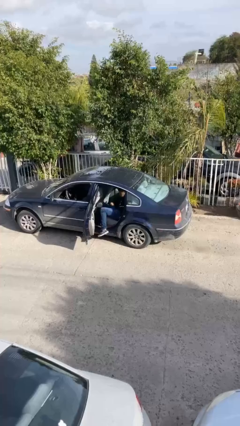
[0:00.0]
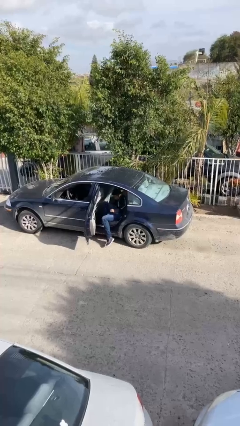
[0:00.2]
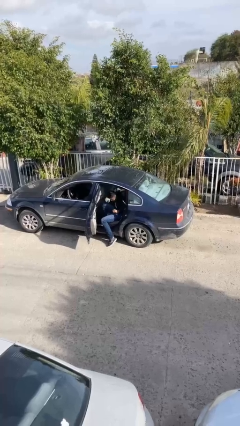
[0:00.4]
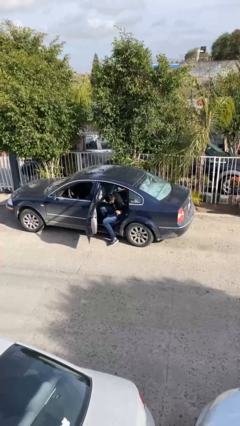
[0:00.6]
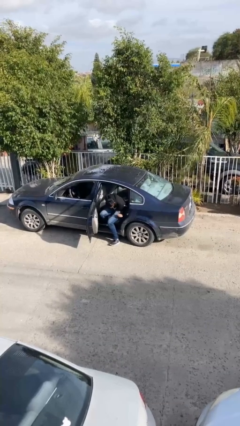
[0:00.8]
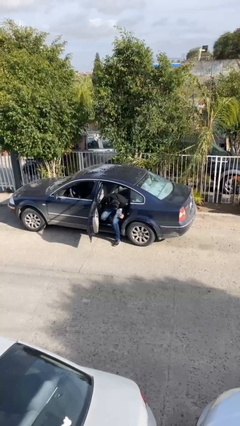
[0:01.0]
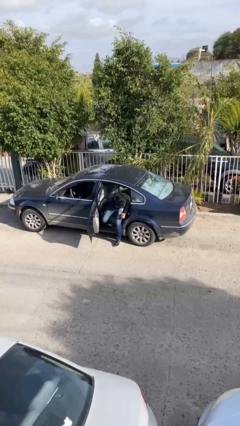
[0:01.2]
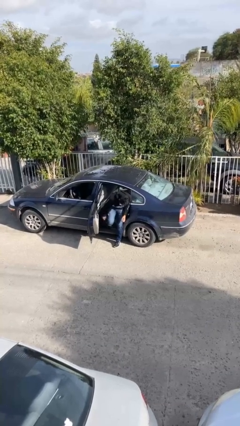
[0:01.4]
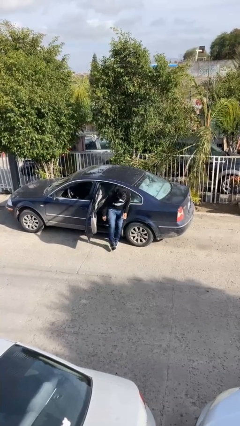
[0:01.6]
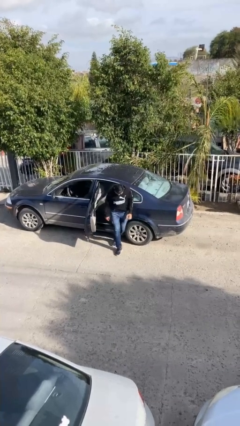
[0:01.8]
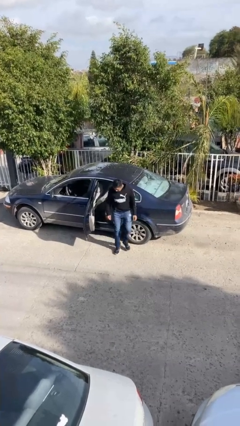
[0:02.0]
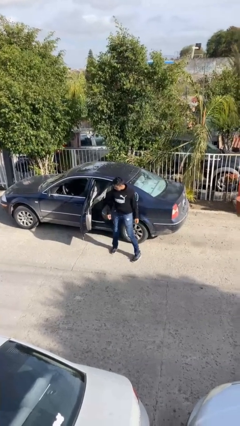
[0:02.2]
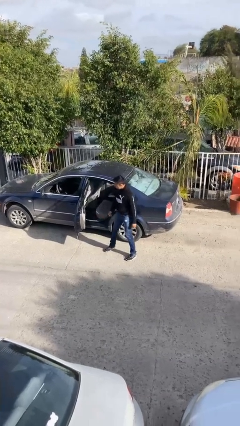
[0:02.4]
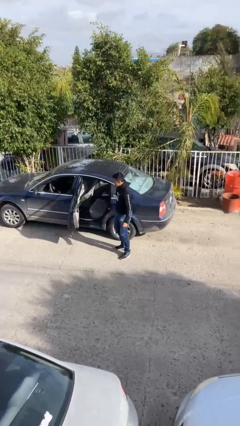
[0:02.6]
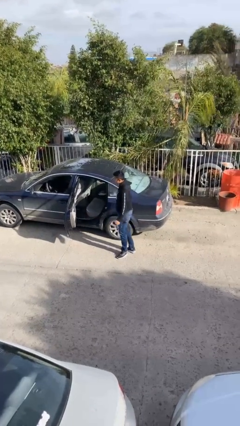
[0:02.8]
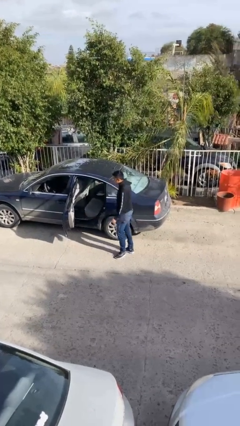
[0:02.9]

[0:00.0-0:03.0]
person exits car

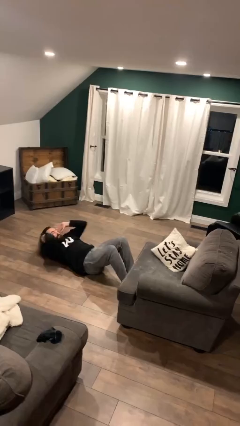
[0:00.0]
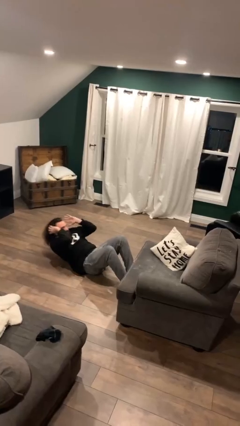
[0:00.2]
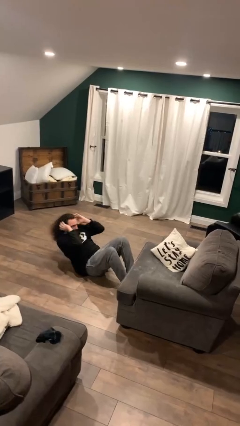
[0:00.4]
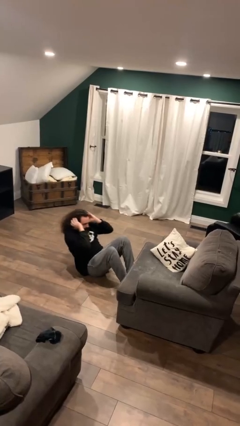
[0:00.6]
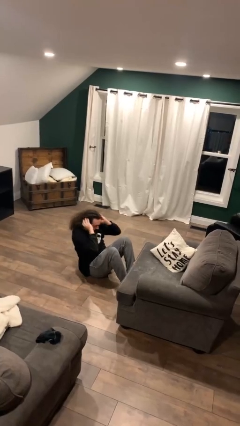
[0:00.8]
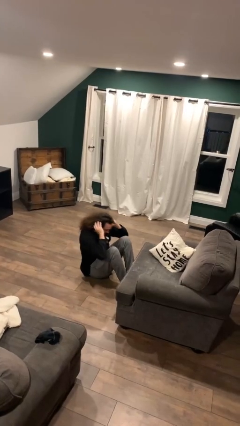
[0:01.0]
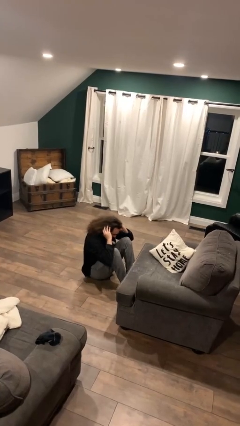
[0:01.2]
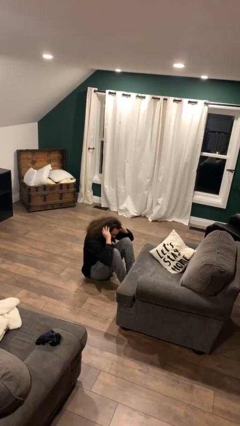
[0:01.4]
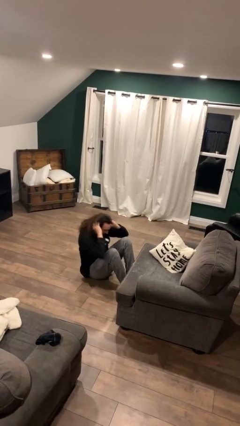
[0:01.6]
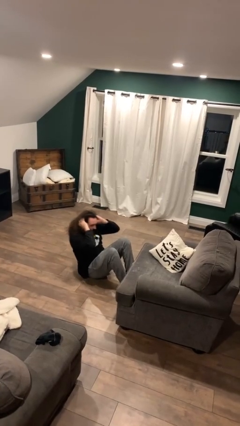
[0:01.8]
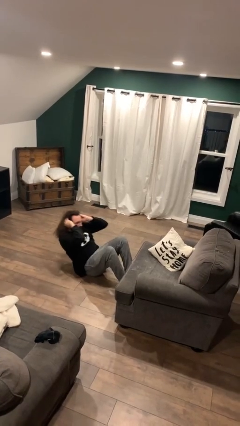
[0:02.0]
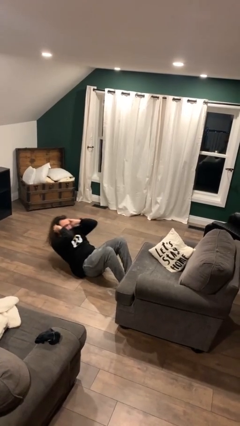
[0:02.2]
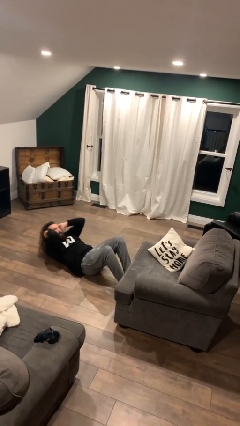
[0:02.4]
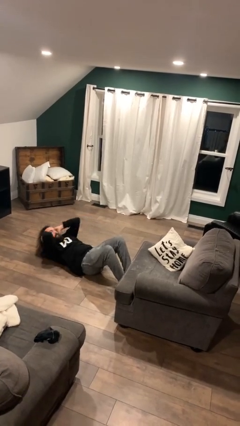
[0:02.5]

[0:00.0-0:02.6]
person exercises with situp

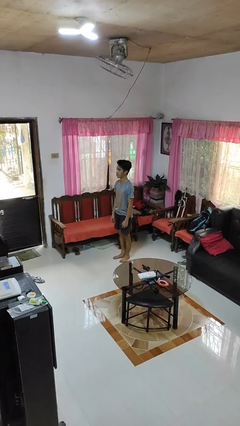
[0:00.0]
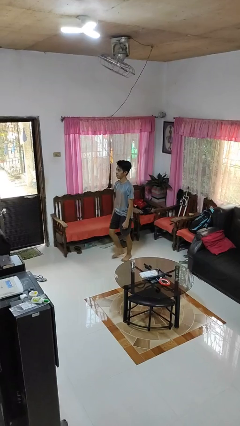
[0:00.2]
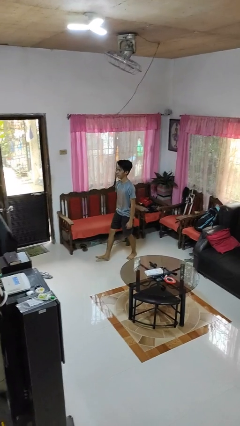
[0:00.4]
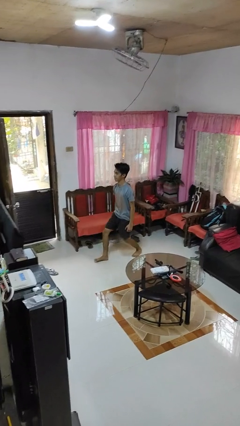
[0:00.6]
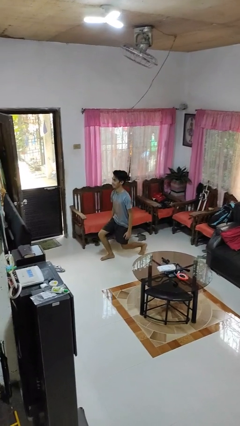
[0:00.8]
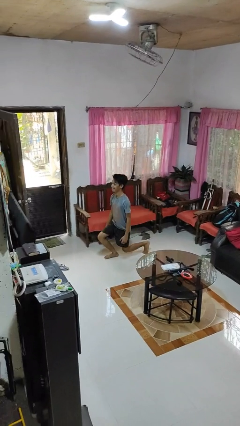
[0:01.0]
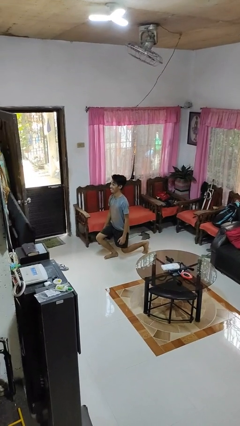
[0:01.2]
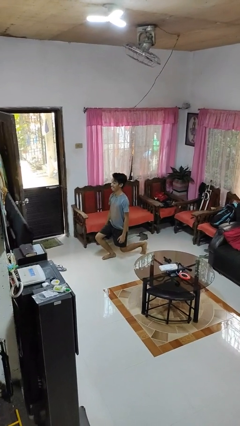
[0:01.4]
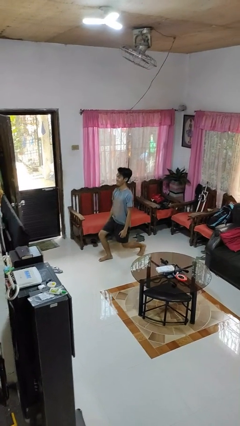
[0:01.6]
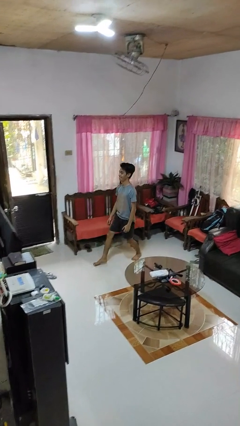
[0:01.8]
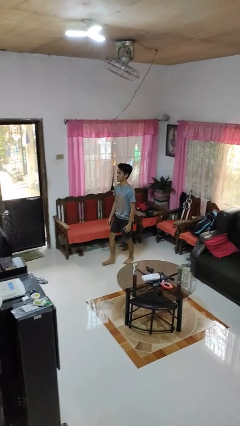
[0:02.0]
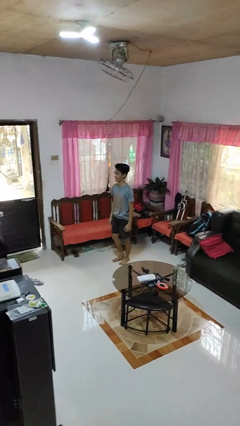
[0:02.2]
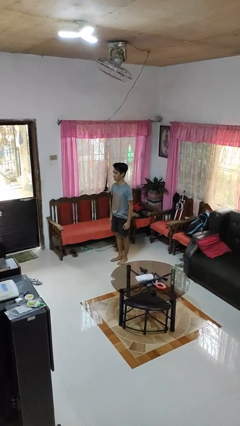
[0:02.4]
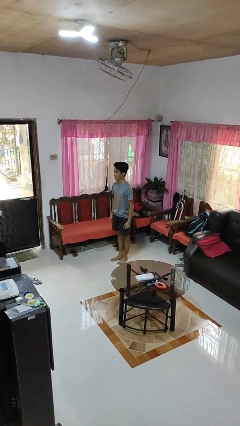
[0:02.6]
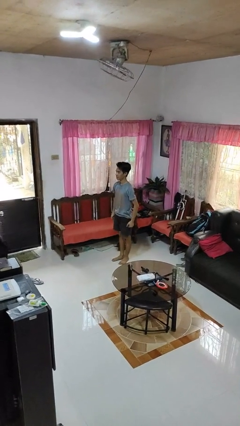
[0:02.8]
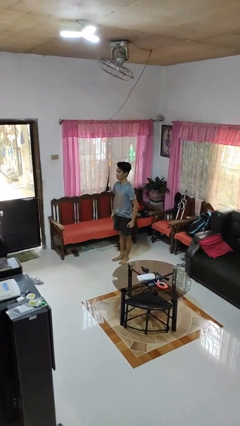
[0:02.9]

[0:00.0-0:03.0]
person exercises with lunges

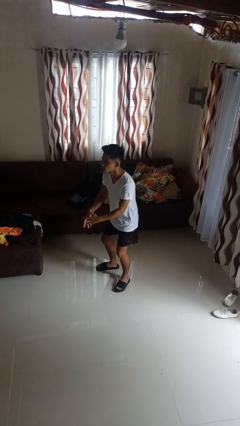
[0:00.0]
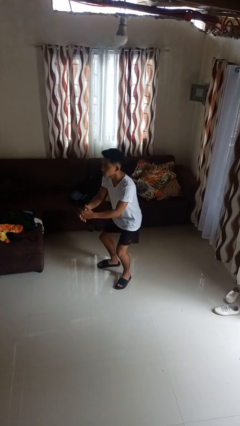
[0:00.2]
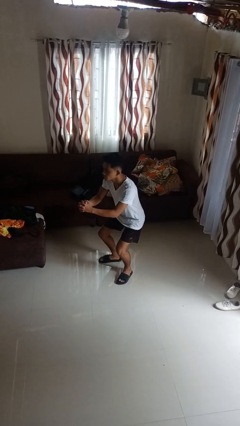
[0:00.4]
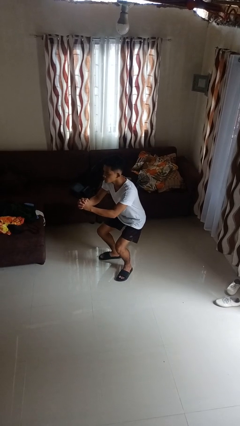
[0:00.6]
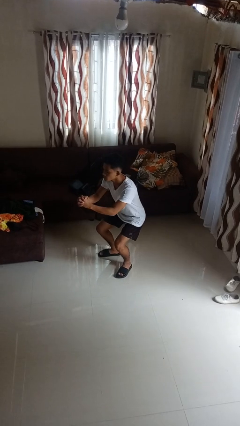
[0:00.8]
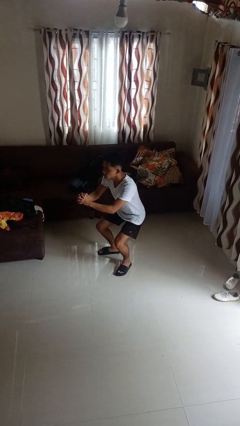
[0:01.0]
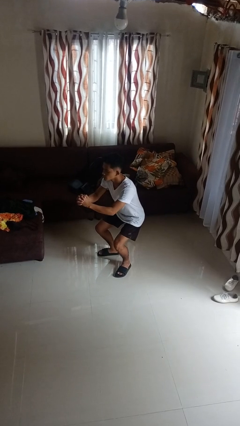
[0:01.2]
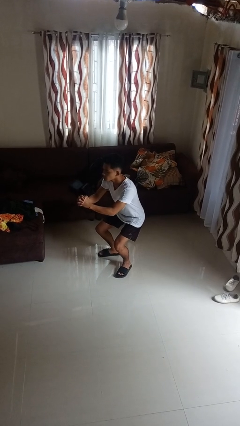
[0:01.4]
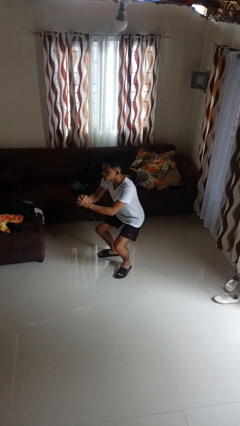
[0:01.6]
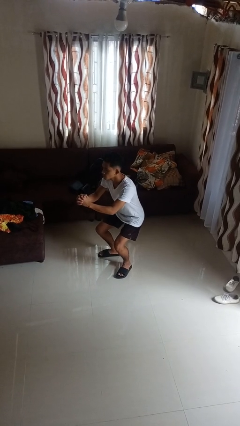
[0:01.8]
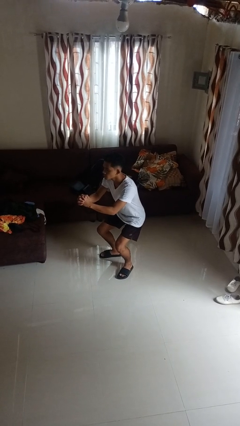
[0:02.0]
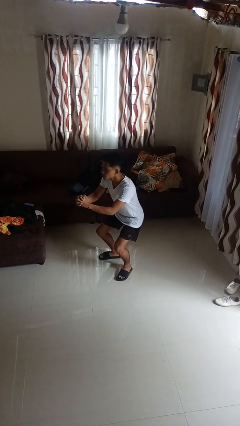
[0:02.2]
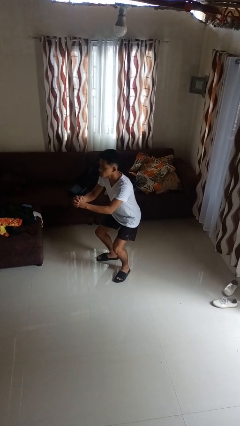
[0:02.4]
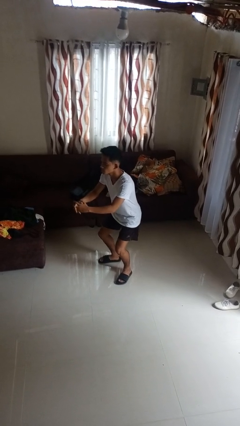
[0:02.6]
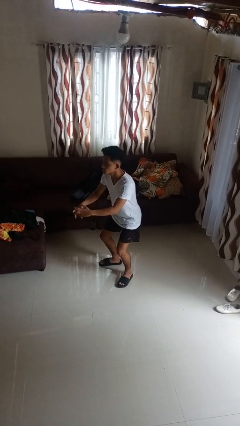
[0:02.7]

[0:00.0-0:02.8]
person squats

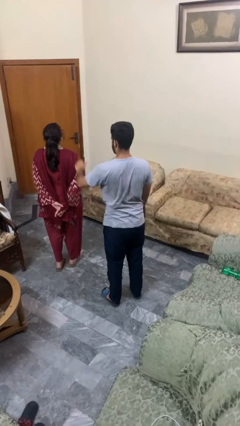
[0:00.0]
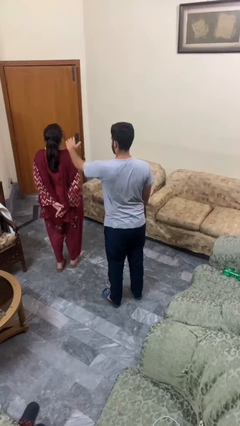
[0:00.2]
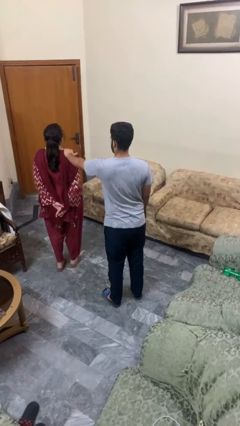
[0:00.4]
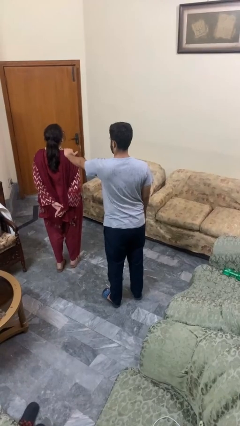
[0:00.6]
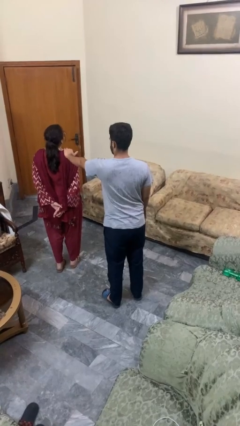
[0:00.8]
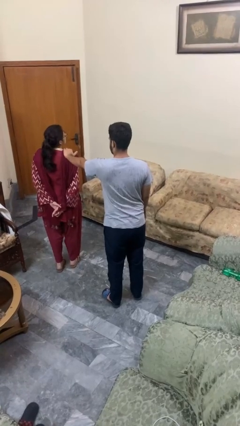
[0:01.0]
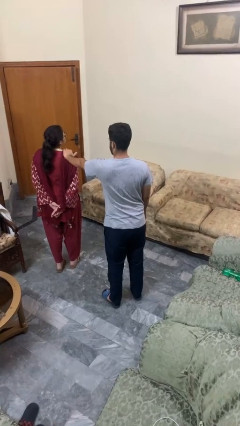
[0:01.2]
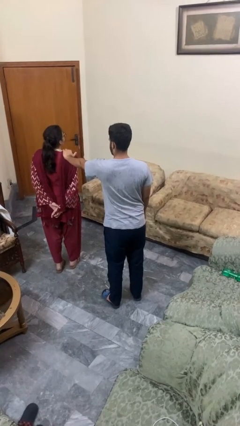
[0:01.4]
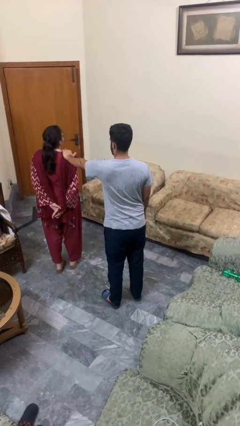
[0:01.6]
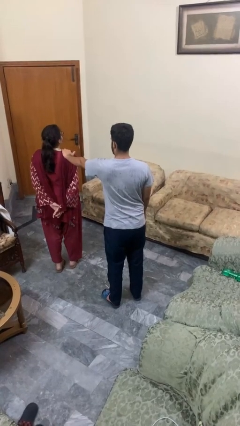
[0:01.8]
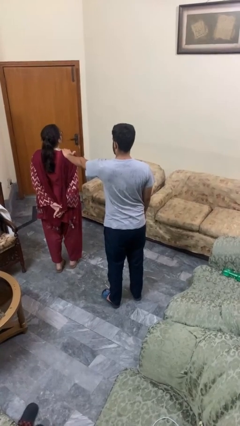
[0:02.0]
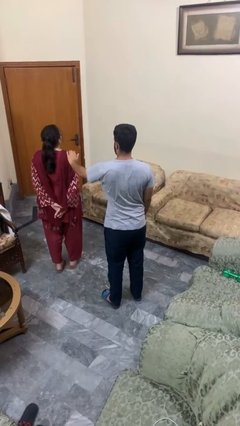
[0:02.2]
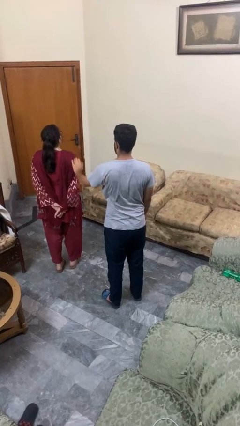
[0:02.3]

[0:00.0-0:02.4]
person pounds shoulders of person

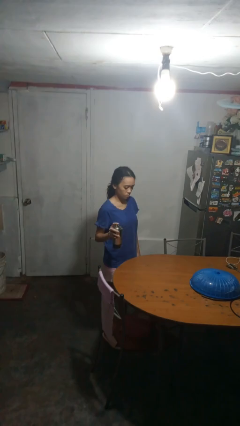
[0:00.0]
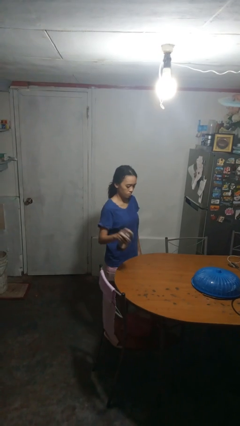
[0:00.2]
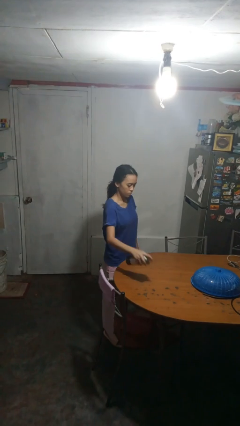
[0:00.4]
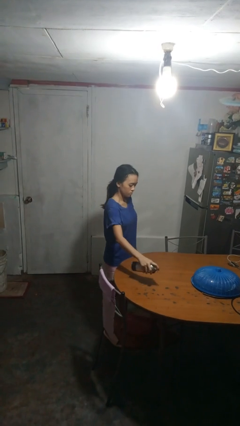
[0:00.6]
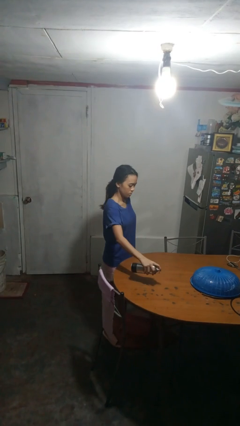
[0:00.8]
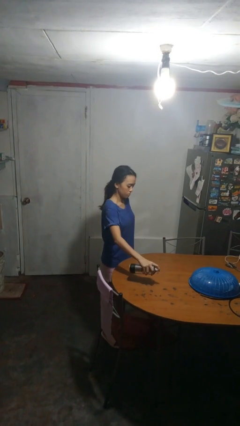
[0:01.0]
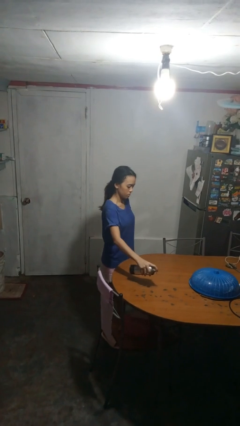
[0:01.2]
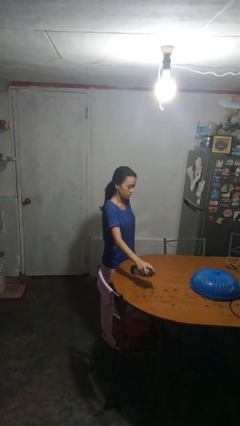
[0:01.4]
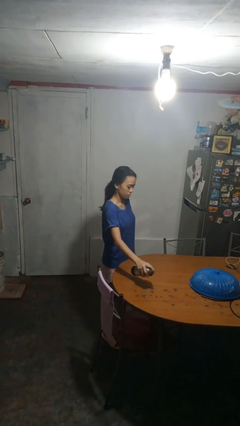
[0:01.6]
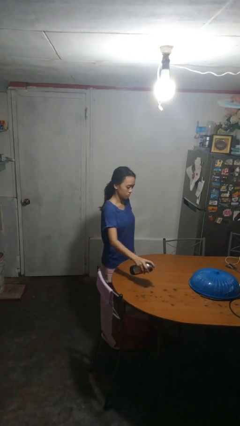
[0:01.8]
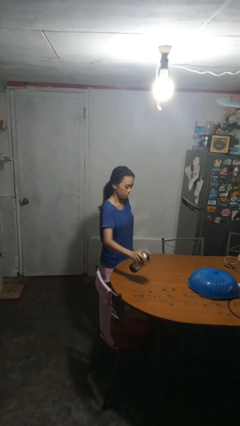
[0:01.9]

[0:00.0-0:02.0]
person sprays from bottle

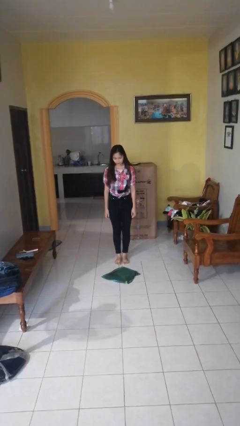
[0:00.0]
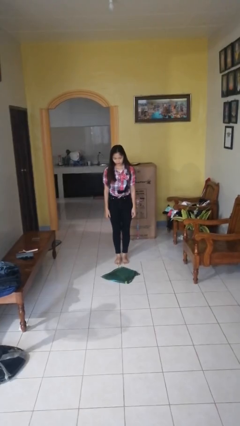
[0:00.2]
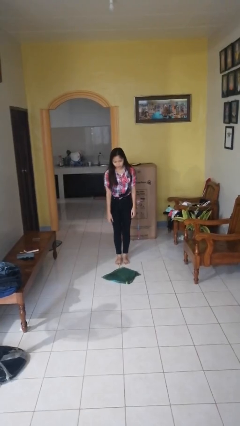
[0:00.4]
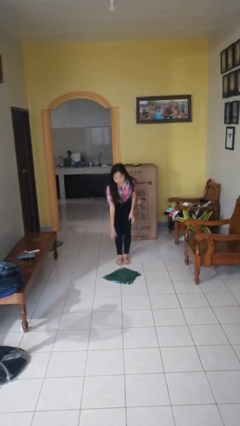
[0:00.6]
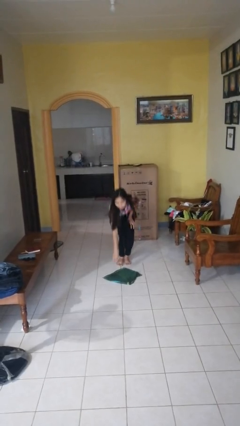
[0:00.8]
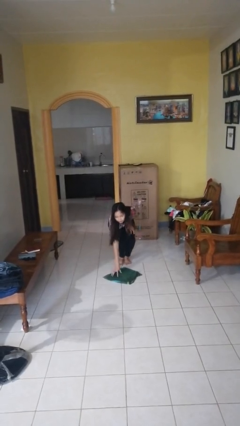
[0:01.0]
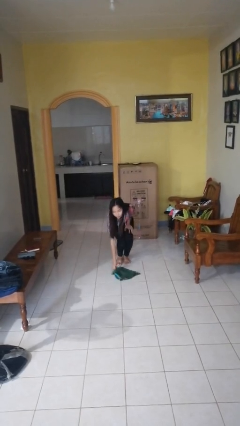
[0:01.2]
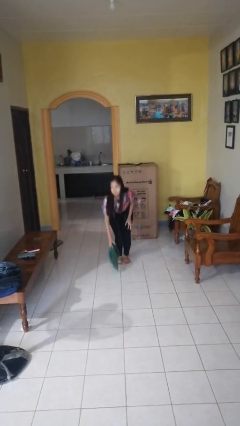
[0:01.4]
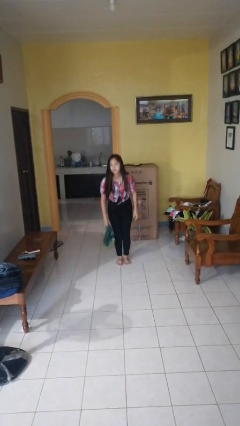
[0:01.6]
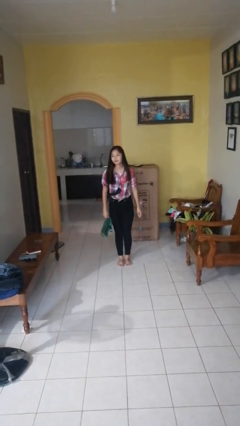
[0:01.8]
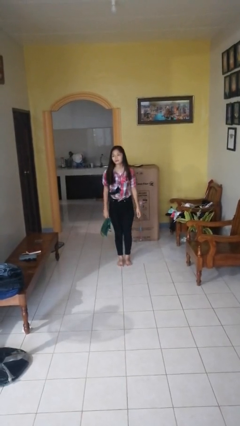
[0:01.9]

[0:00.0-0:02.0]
person picks up object from floor
